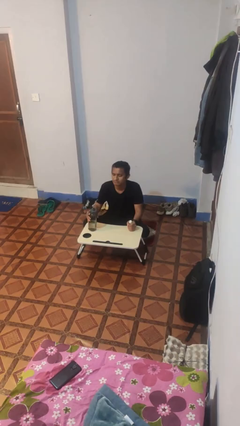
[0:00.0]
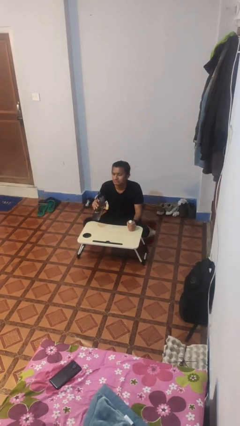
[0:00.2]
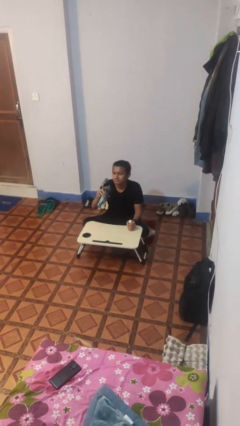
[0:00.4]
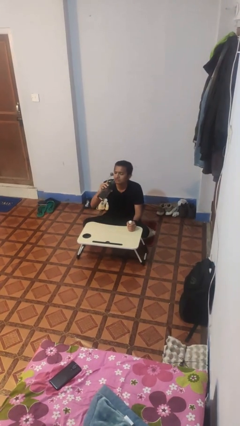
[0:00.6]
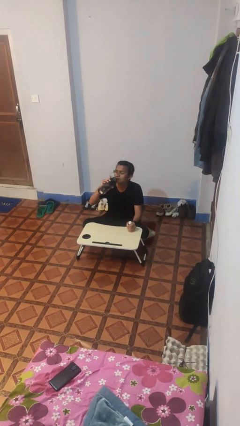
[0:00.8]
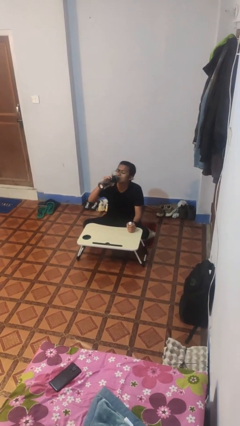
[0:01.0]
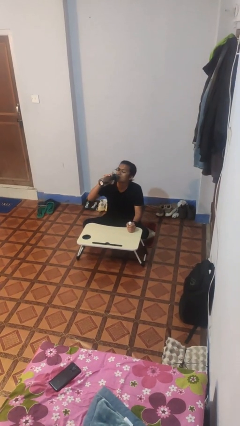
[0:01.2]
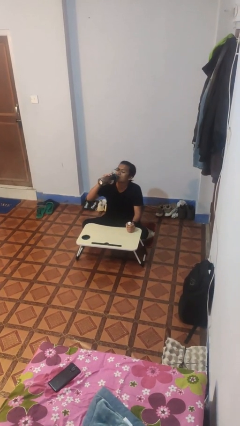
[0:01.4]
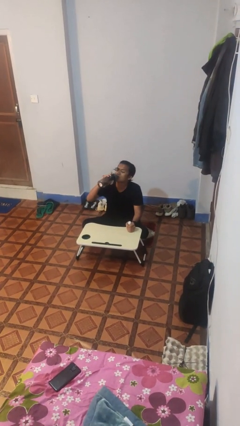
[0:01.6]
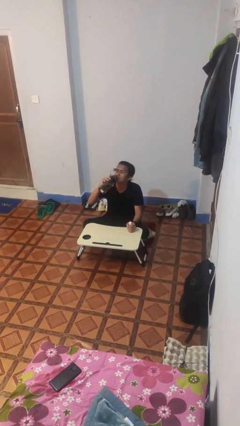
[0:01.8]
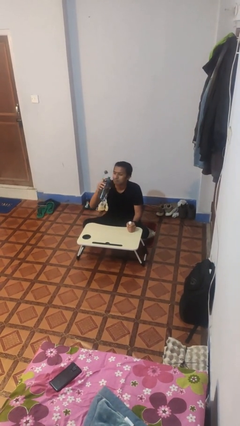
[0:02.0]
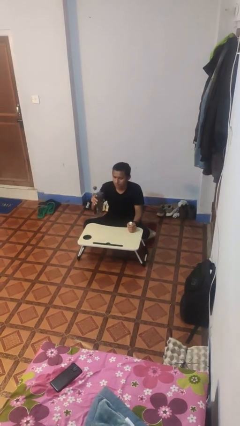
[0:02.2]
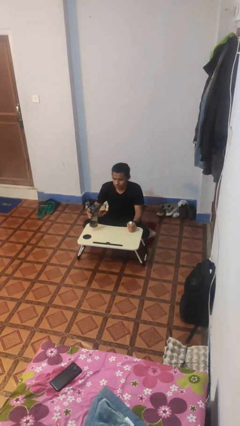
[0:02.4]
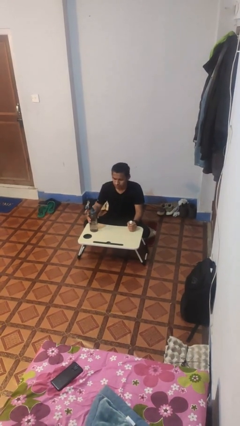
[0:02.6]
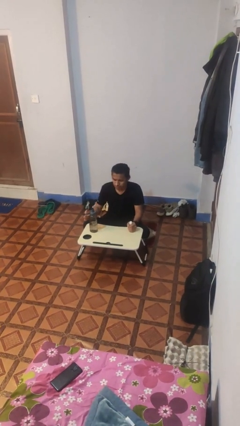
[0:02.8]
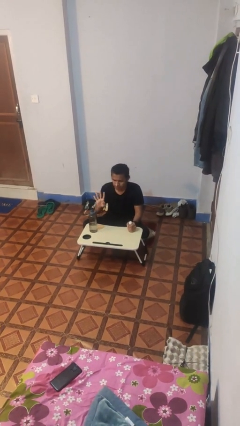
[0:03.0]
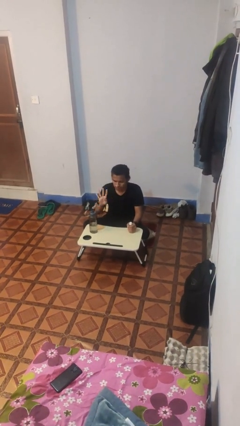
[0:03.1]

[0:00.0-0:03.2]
person drinks from cup

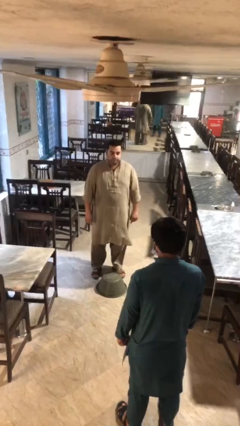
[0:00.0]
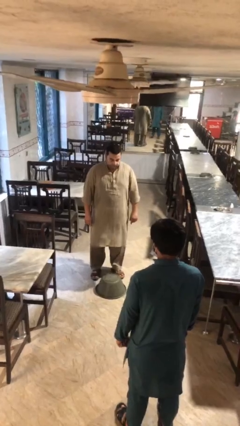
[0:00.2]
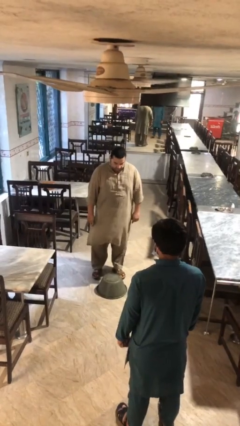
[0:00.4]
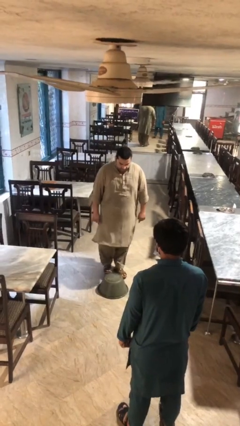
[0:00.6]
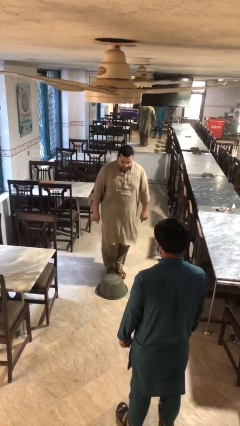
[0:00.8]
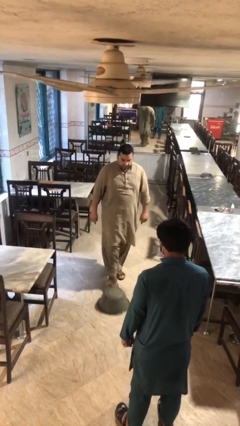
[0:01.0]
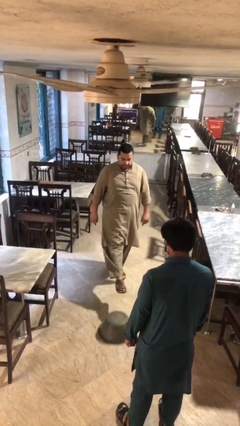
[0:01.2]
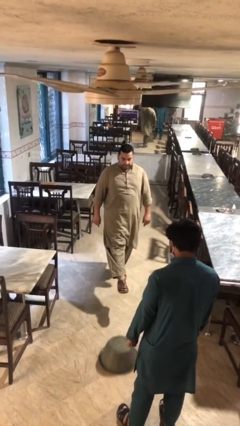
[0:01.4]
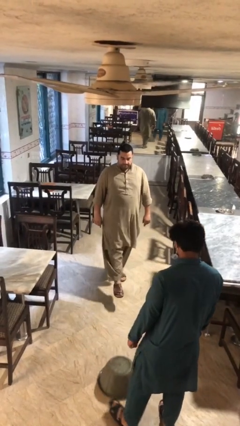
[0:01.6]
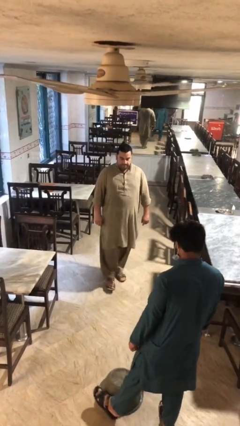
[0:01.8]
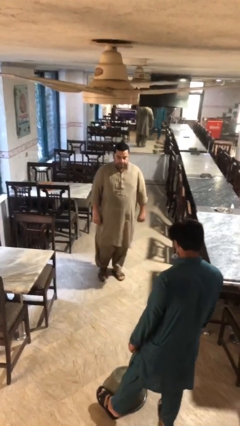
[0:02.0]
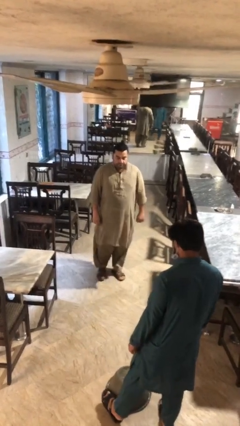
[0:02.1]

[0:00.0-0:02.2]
person kicks object to person

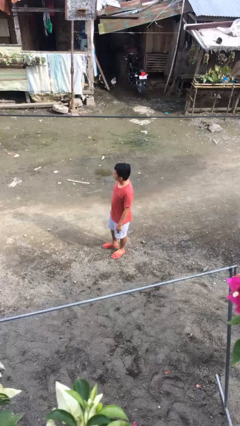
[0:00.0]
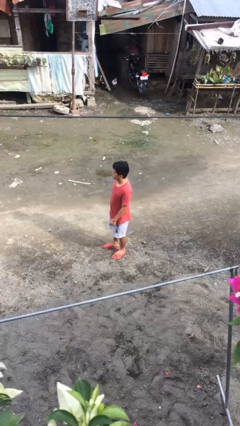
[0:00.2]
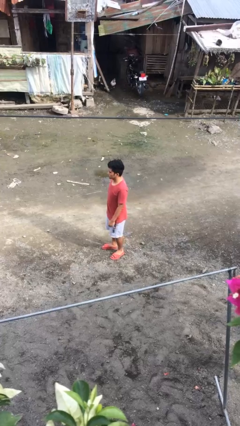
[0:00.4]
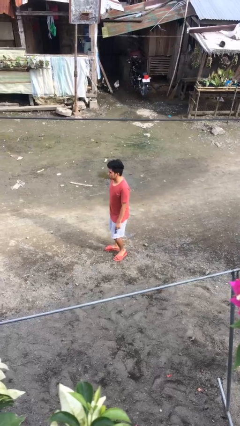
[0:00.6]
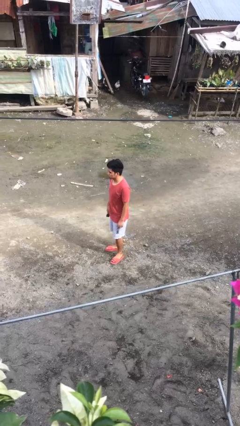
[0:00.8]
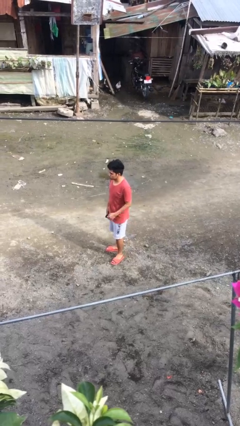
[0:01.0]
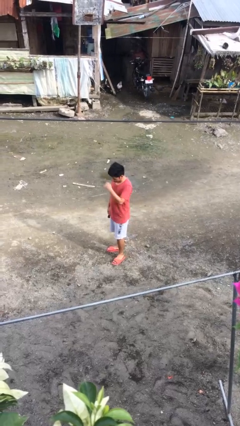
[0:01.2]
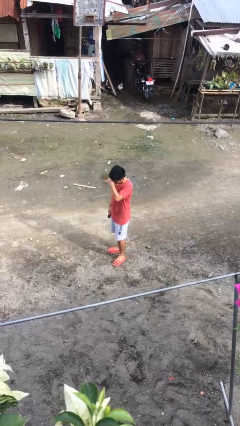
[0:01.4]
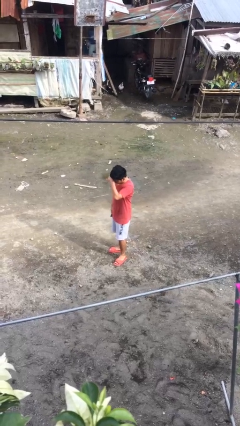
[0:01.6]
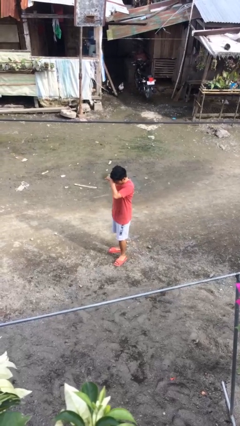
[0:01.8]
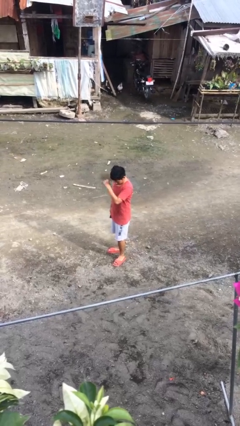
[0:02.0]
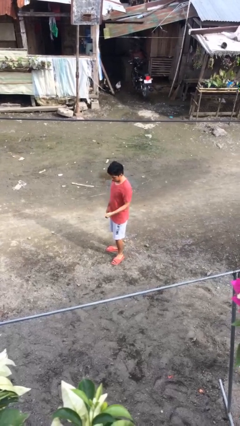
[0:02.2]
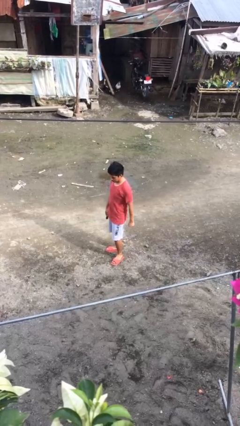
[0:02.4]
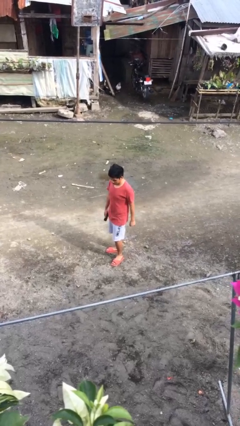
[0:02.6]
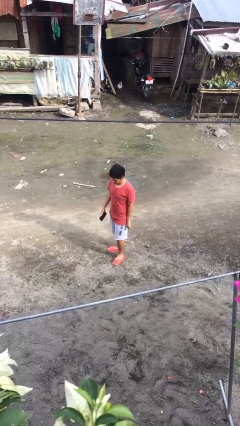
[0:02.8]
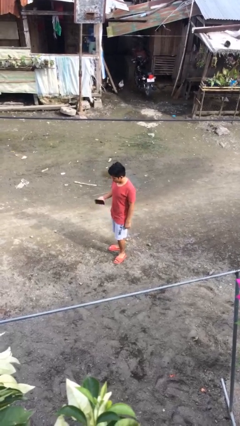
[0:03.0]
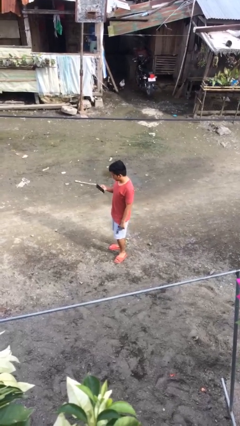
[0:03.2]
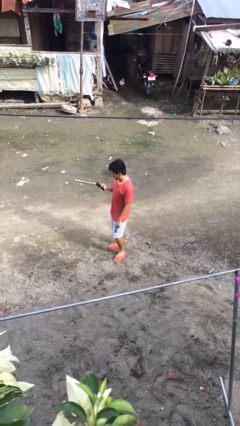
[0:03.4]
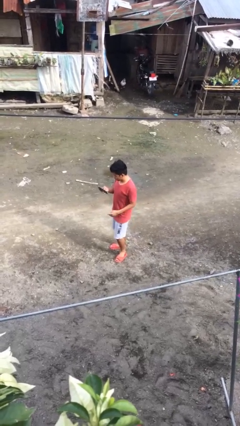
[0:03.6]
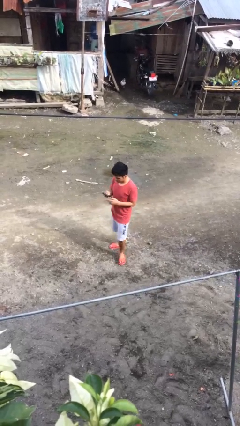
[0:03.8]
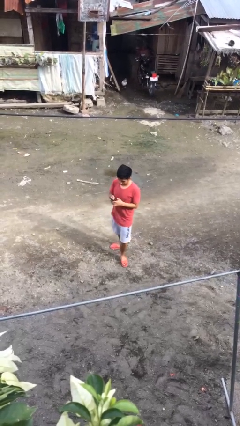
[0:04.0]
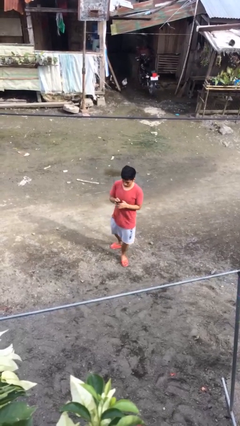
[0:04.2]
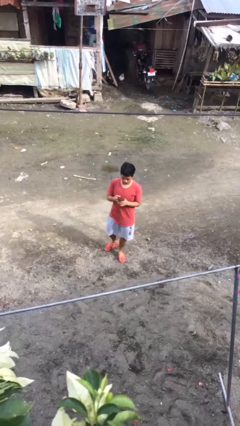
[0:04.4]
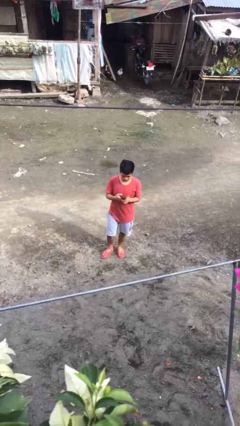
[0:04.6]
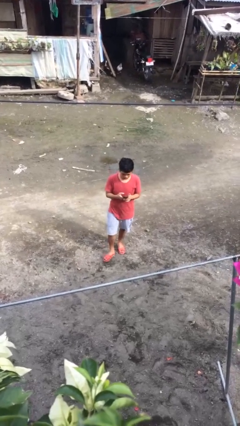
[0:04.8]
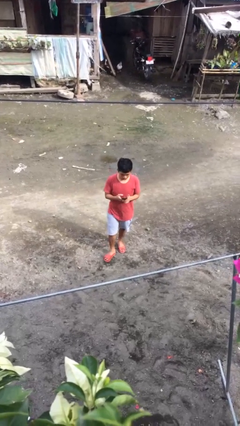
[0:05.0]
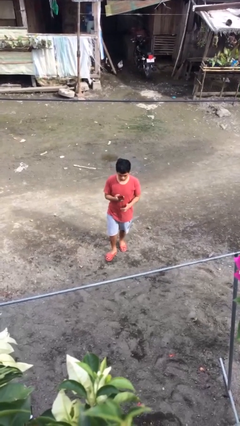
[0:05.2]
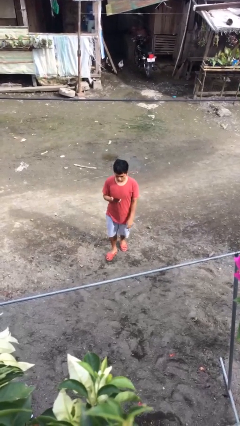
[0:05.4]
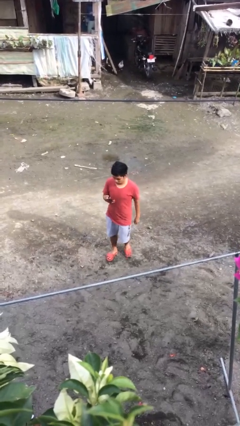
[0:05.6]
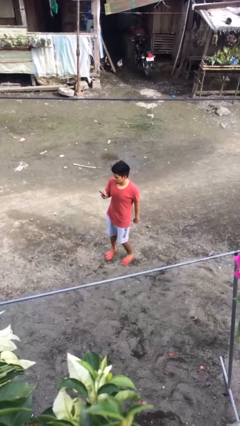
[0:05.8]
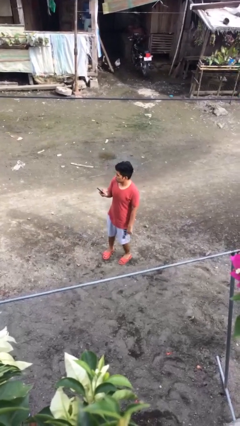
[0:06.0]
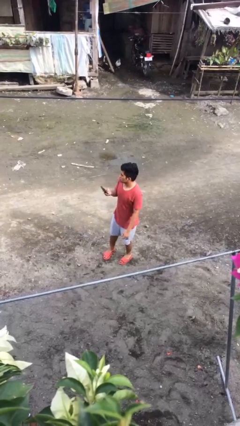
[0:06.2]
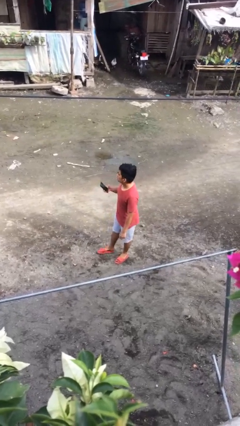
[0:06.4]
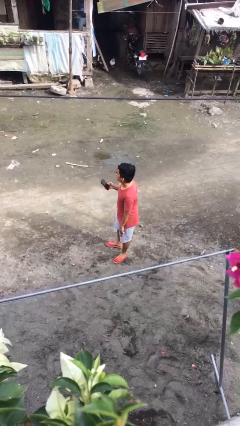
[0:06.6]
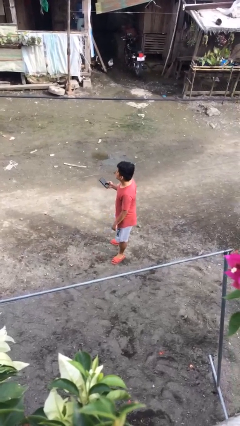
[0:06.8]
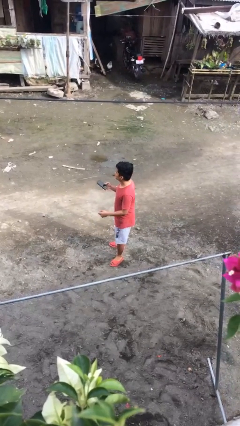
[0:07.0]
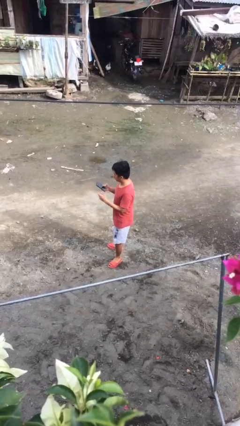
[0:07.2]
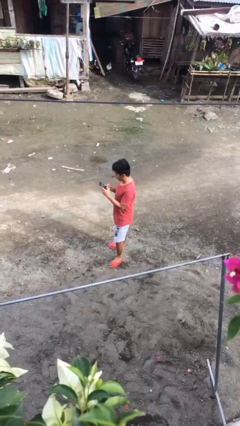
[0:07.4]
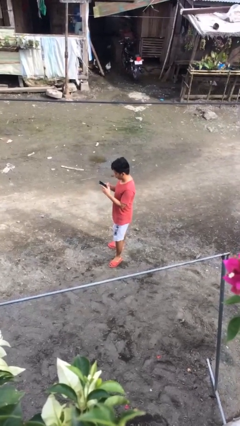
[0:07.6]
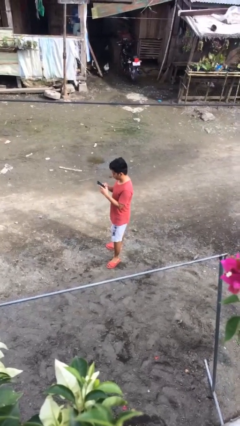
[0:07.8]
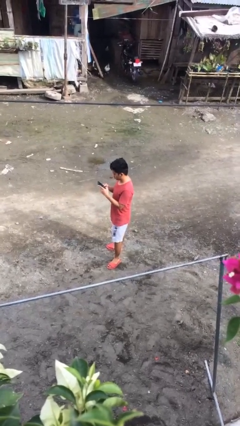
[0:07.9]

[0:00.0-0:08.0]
person walks

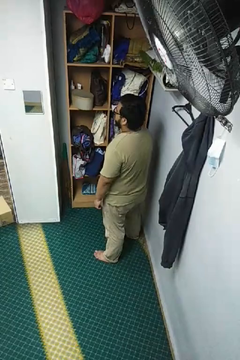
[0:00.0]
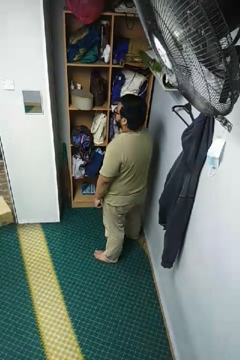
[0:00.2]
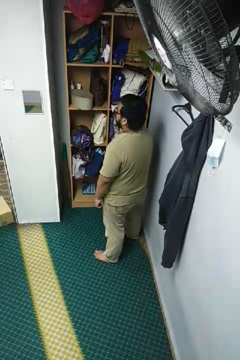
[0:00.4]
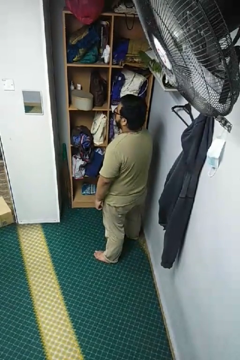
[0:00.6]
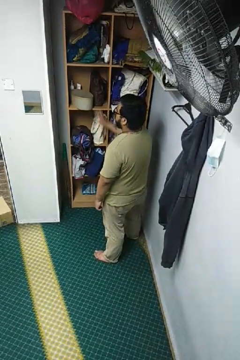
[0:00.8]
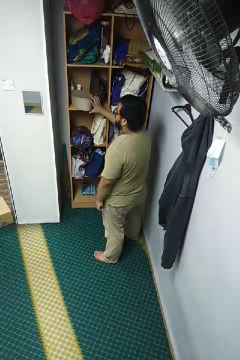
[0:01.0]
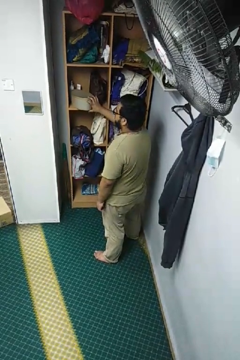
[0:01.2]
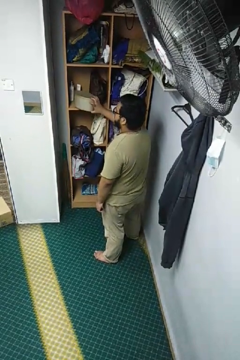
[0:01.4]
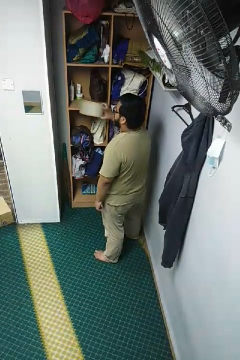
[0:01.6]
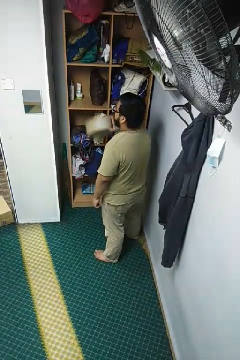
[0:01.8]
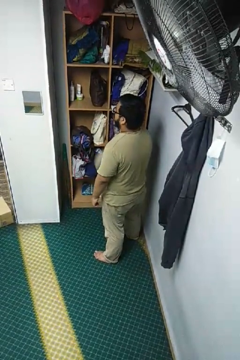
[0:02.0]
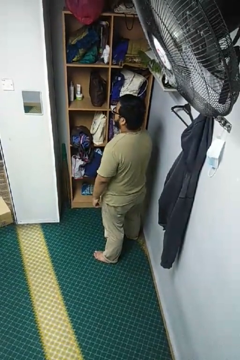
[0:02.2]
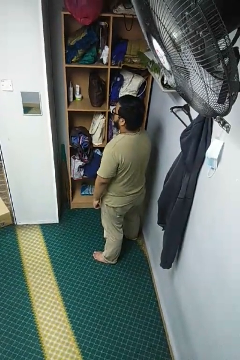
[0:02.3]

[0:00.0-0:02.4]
person picks up object from cabinet

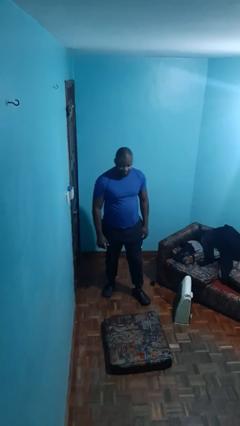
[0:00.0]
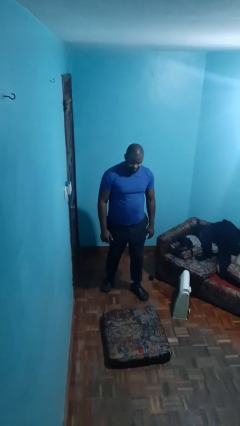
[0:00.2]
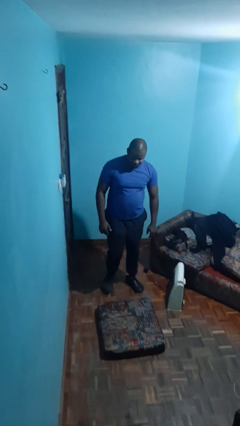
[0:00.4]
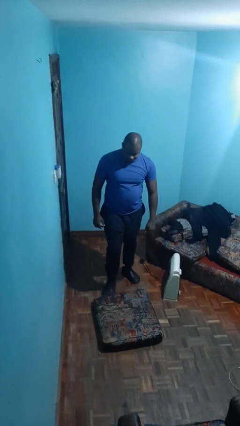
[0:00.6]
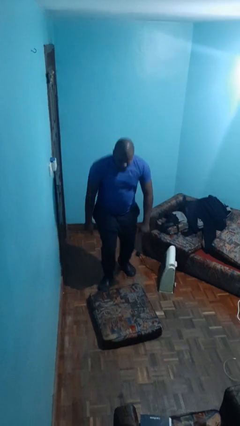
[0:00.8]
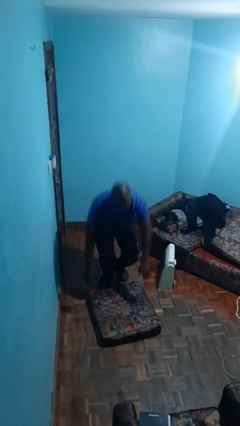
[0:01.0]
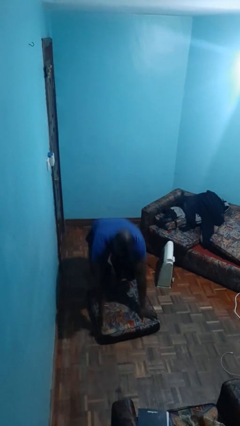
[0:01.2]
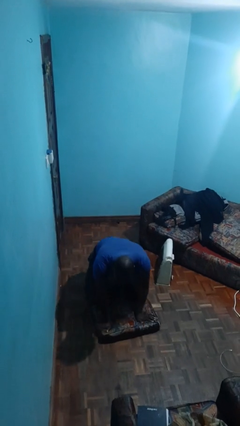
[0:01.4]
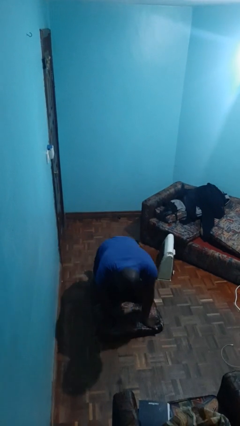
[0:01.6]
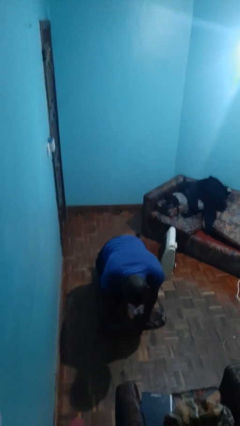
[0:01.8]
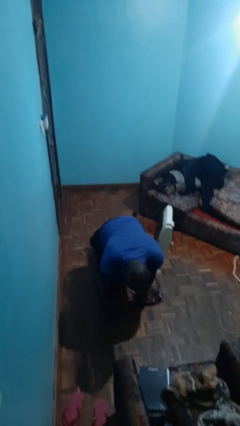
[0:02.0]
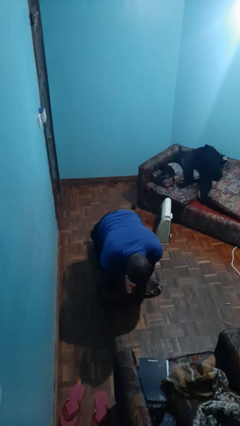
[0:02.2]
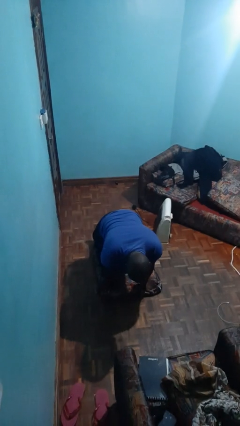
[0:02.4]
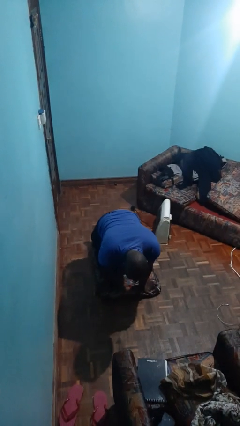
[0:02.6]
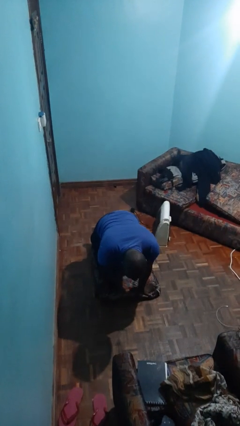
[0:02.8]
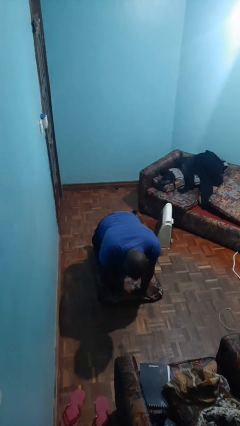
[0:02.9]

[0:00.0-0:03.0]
person trips on object on floor
